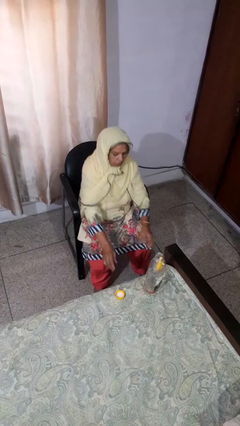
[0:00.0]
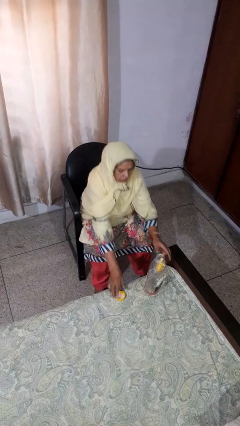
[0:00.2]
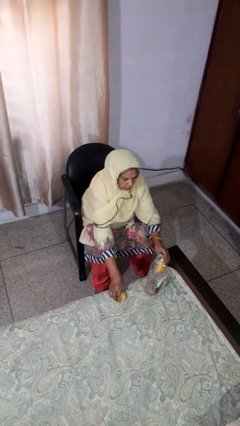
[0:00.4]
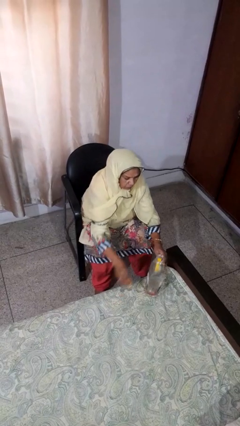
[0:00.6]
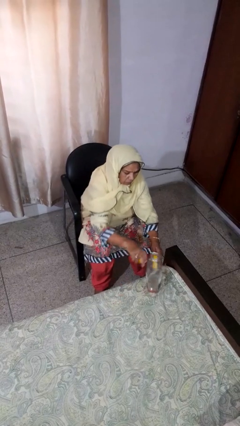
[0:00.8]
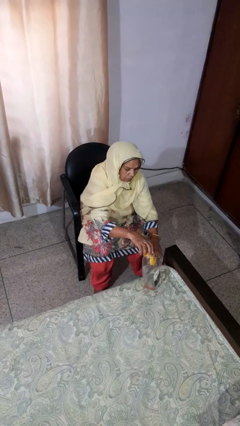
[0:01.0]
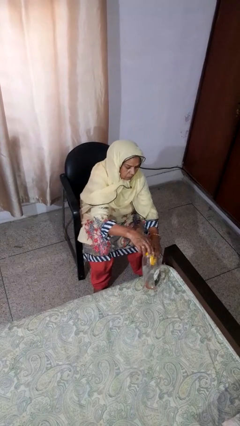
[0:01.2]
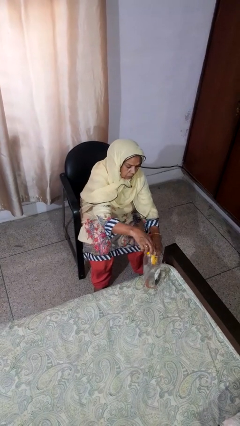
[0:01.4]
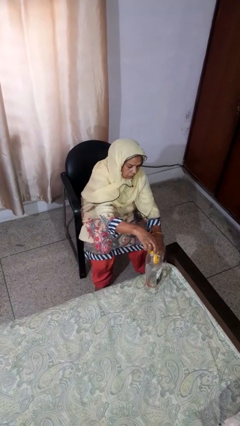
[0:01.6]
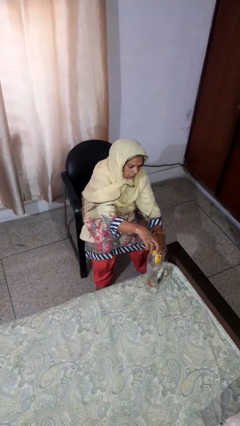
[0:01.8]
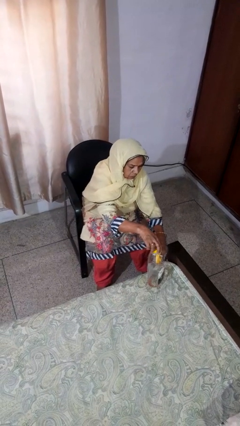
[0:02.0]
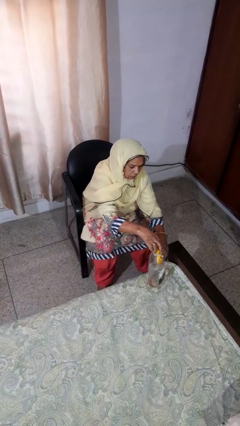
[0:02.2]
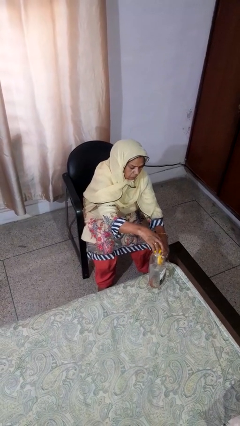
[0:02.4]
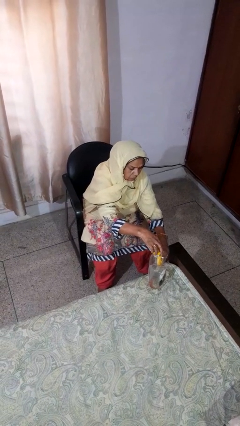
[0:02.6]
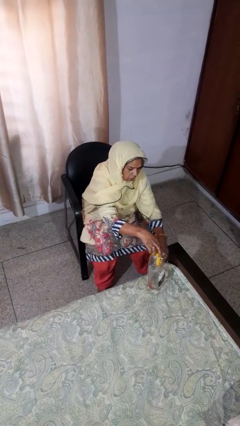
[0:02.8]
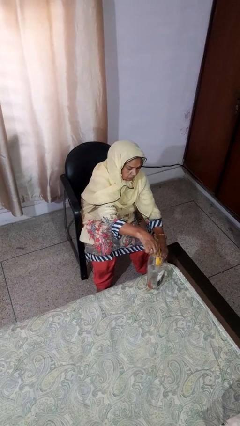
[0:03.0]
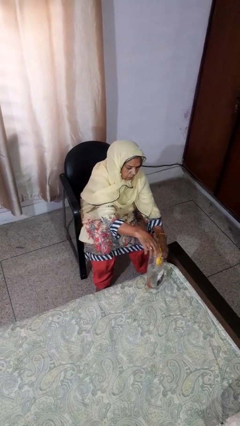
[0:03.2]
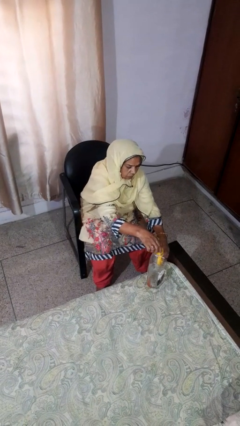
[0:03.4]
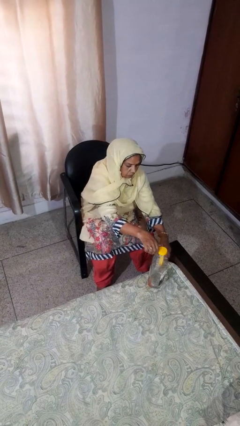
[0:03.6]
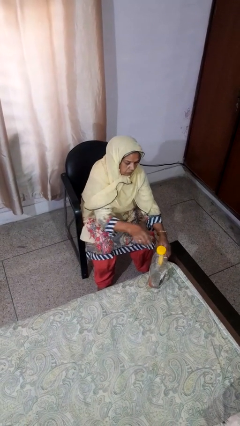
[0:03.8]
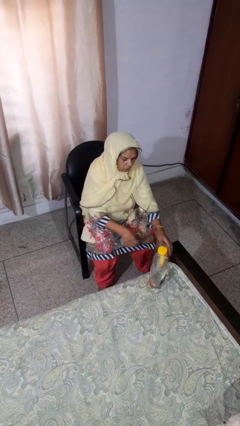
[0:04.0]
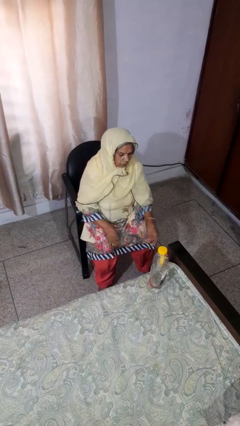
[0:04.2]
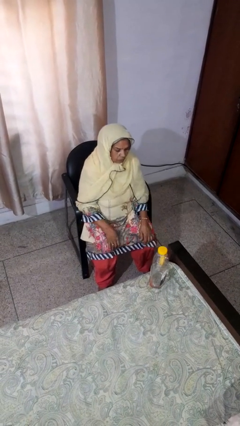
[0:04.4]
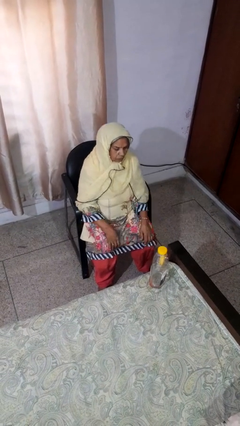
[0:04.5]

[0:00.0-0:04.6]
person screws lid to bottle

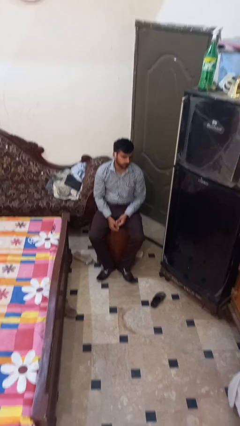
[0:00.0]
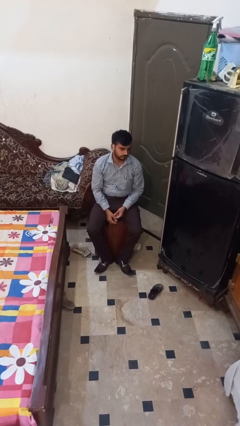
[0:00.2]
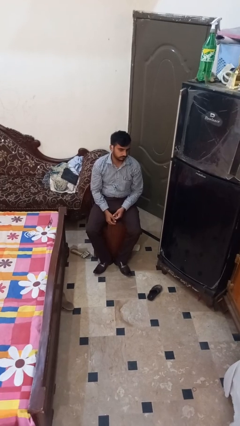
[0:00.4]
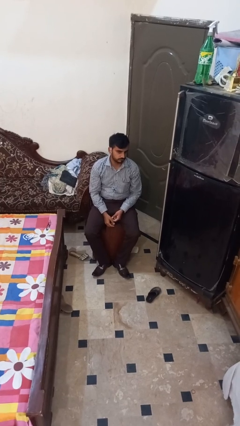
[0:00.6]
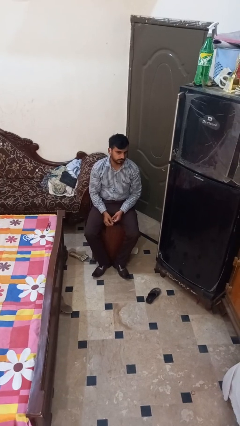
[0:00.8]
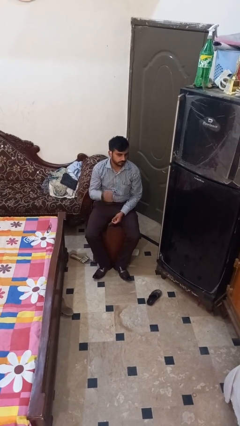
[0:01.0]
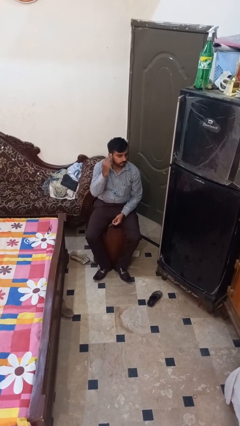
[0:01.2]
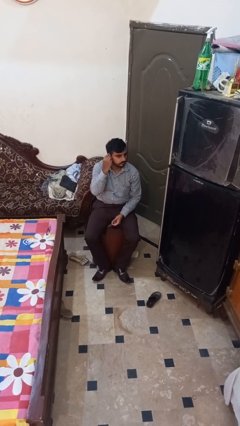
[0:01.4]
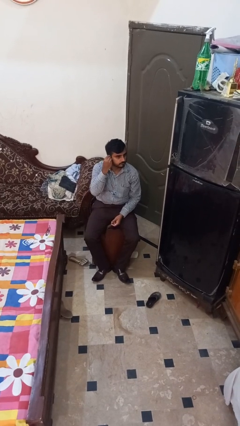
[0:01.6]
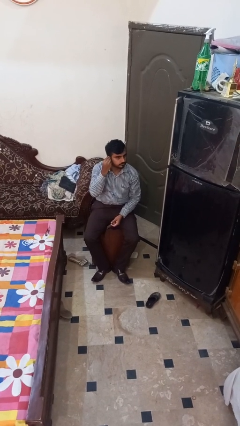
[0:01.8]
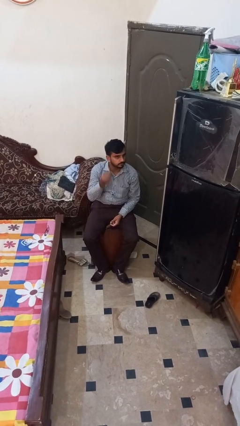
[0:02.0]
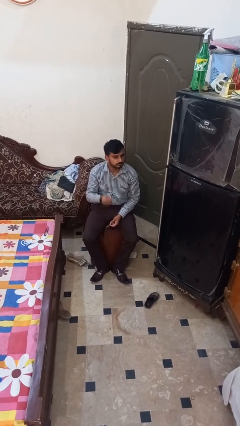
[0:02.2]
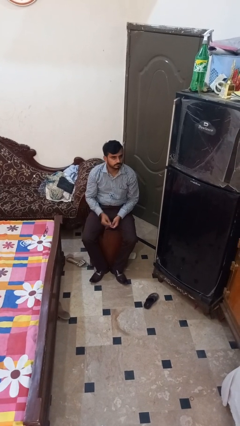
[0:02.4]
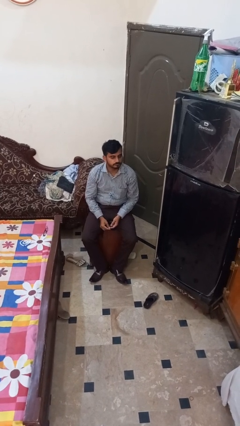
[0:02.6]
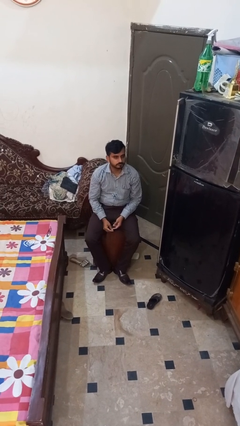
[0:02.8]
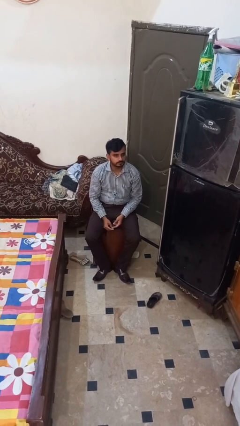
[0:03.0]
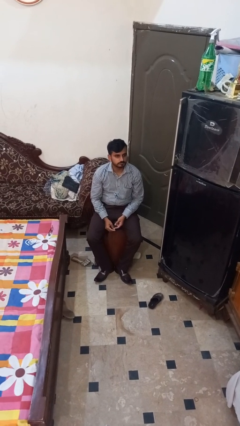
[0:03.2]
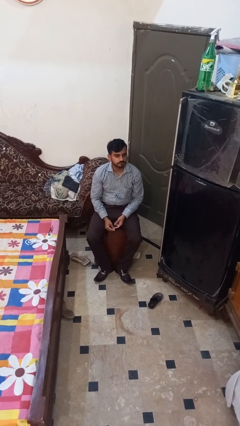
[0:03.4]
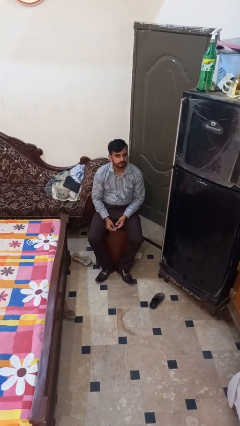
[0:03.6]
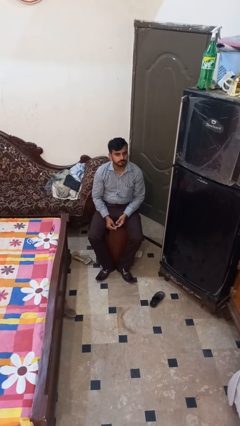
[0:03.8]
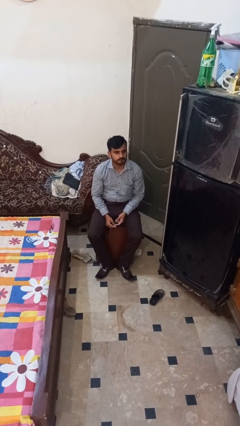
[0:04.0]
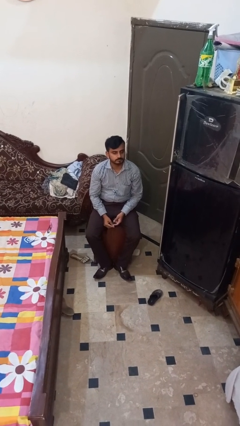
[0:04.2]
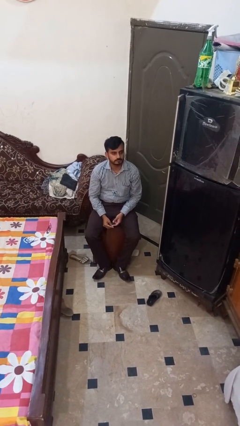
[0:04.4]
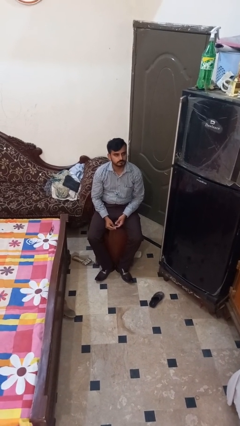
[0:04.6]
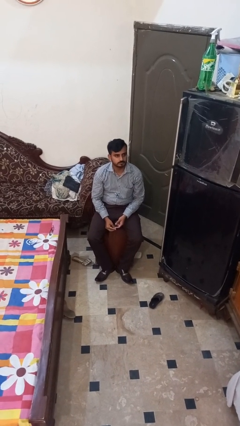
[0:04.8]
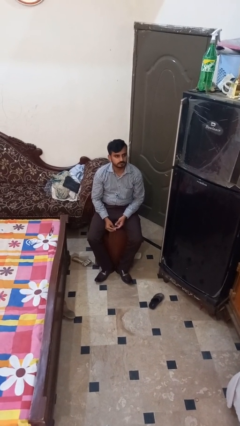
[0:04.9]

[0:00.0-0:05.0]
person takes off earrings

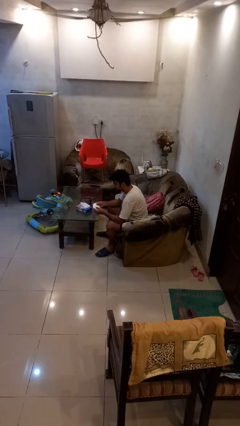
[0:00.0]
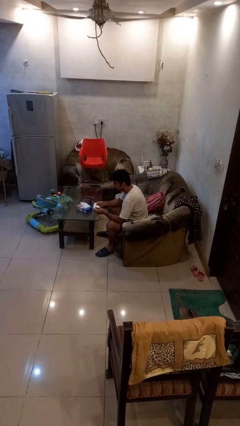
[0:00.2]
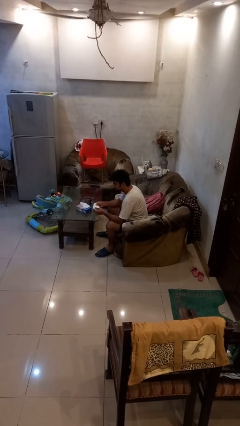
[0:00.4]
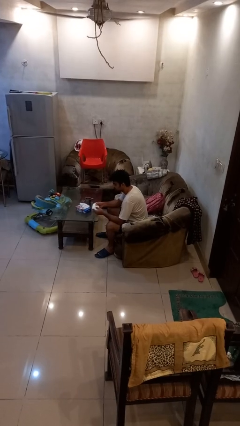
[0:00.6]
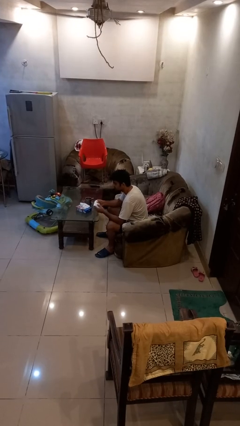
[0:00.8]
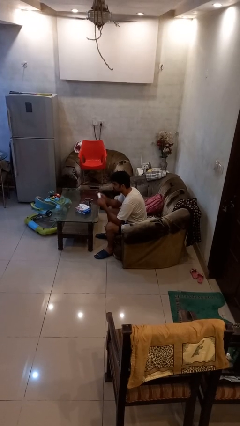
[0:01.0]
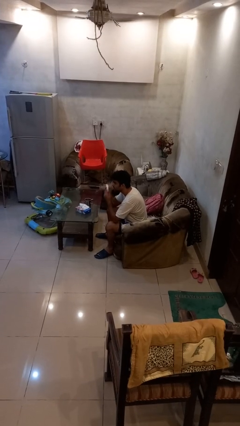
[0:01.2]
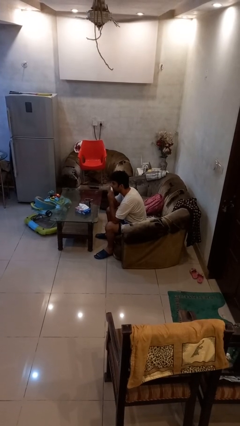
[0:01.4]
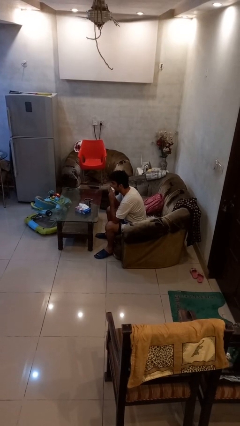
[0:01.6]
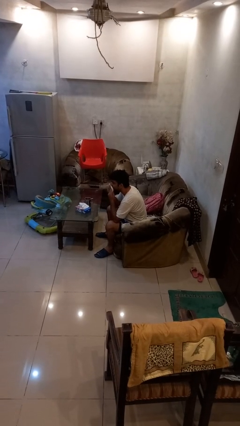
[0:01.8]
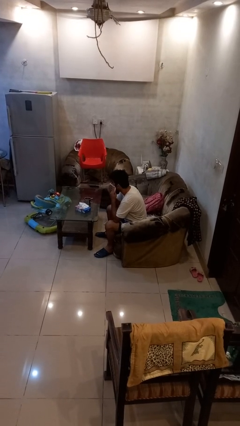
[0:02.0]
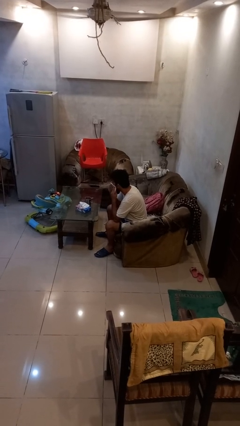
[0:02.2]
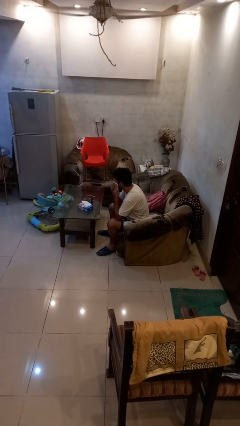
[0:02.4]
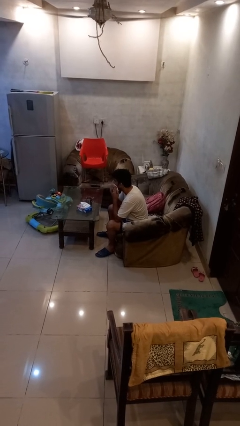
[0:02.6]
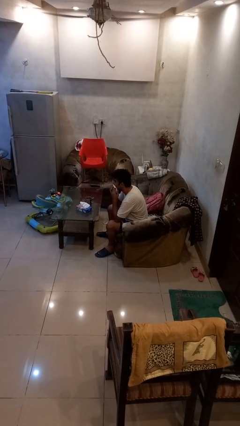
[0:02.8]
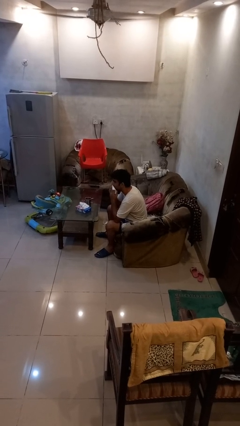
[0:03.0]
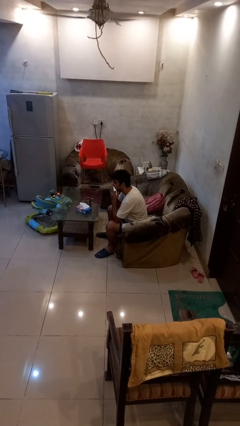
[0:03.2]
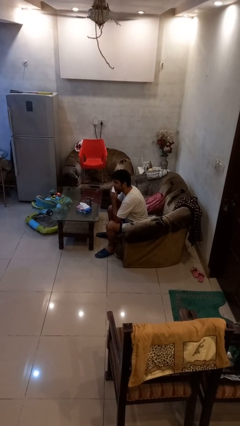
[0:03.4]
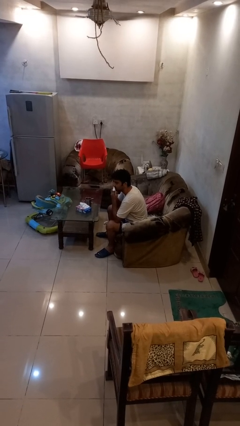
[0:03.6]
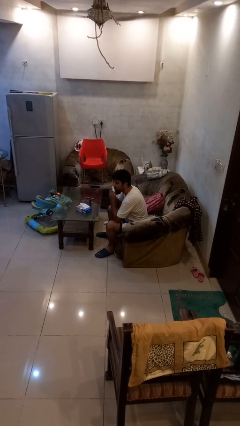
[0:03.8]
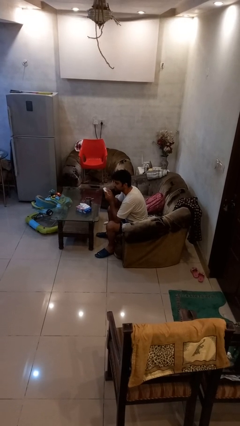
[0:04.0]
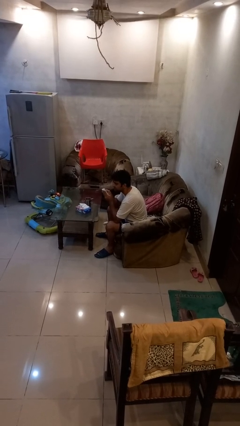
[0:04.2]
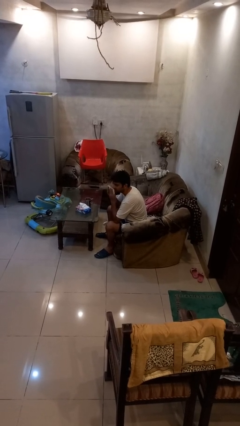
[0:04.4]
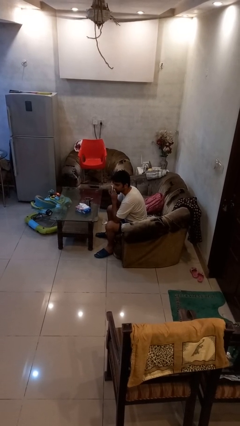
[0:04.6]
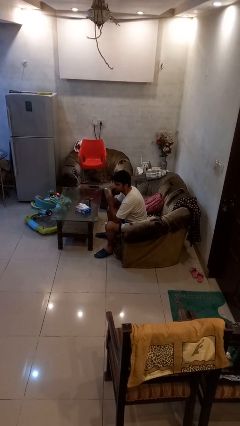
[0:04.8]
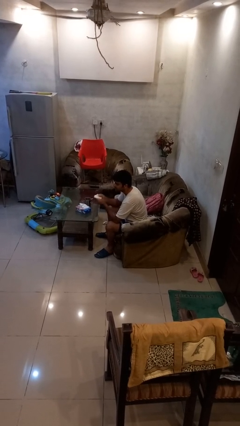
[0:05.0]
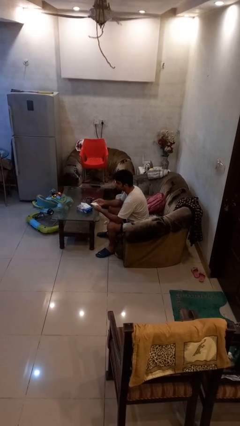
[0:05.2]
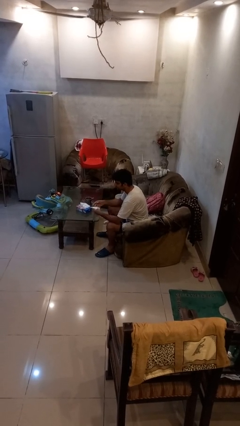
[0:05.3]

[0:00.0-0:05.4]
person wipes mouth with napkin

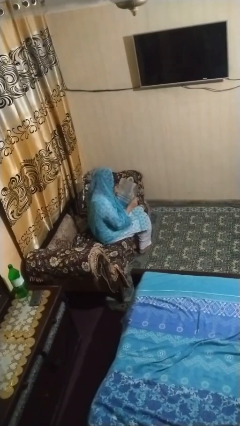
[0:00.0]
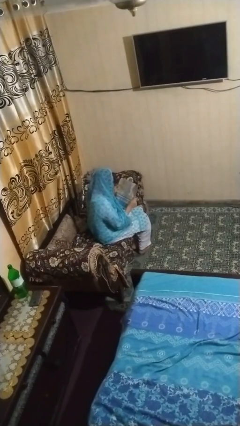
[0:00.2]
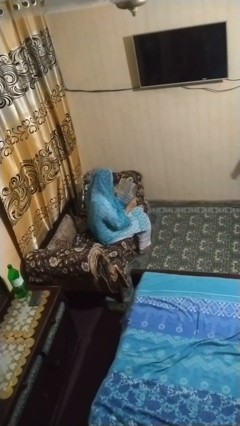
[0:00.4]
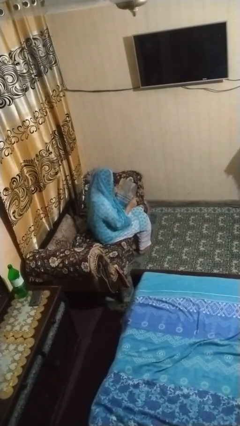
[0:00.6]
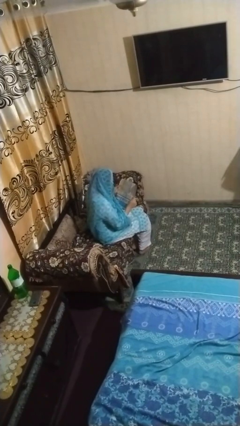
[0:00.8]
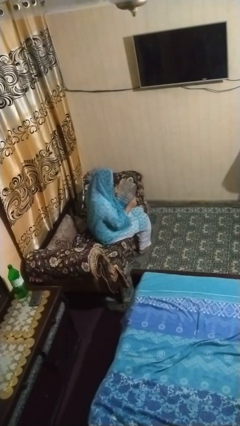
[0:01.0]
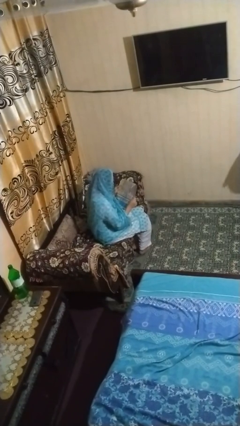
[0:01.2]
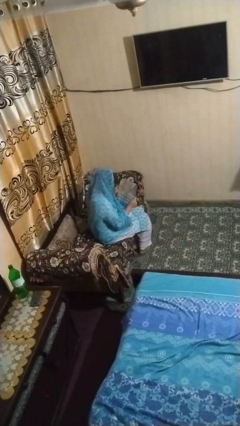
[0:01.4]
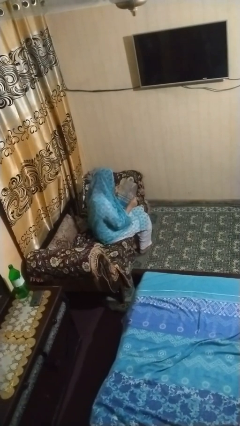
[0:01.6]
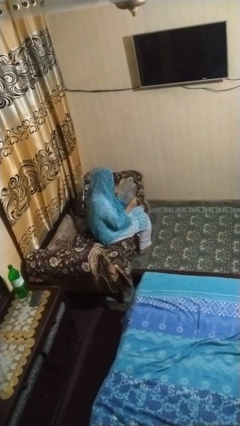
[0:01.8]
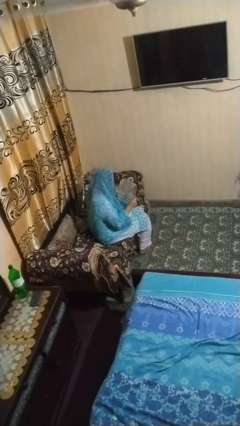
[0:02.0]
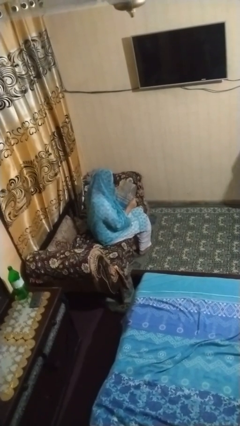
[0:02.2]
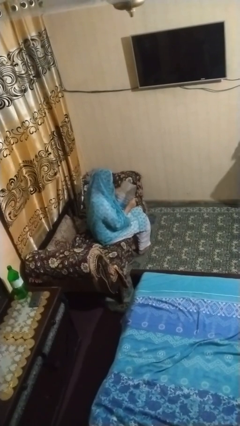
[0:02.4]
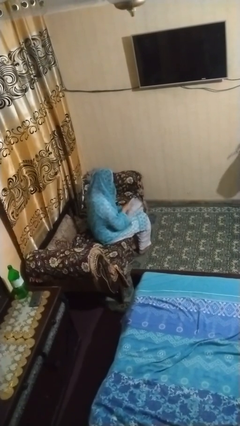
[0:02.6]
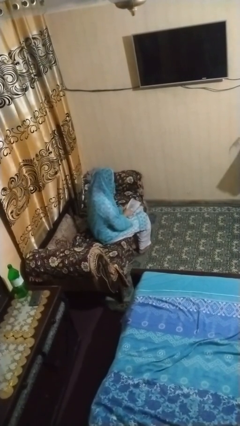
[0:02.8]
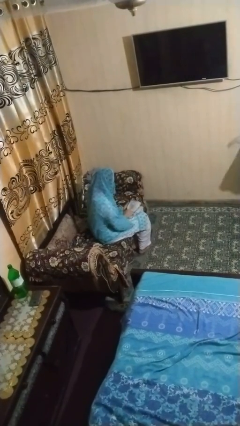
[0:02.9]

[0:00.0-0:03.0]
person reads newspaper
